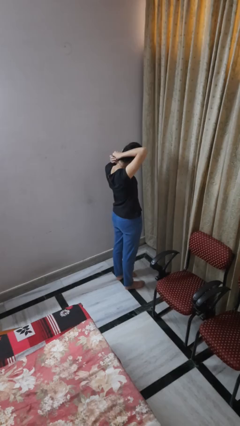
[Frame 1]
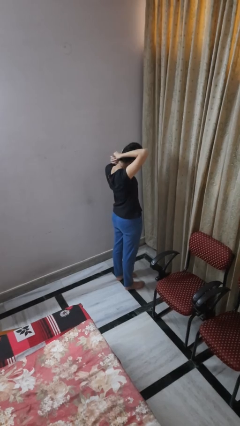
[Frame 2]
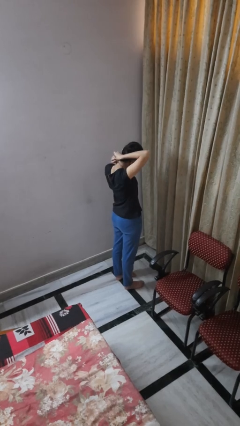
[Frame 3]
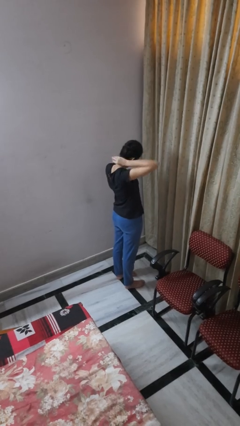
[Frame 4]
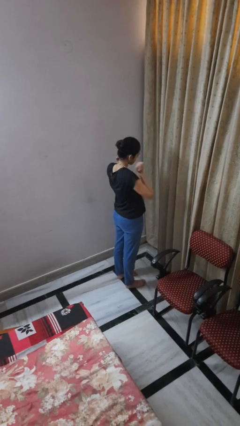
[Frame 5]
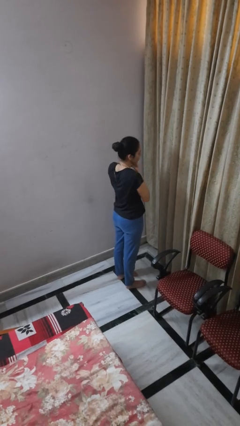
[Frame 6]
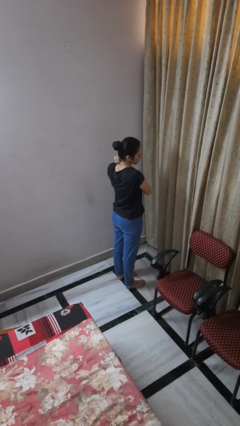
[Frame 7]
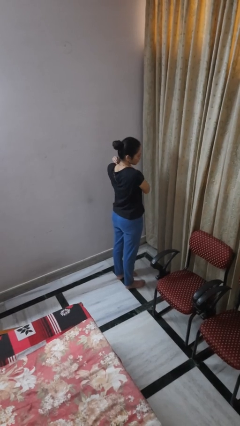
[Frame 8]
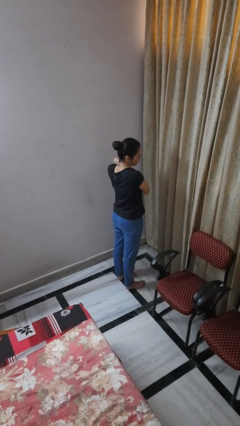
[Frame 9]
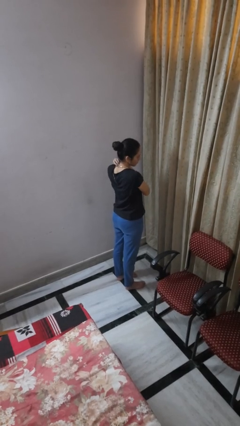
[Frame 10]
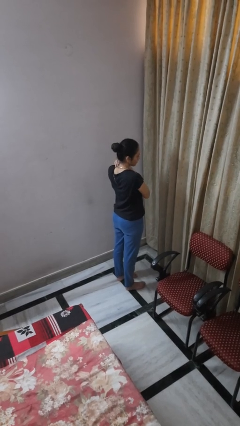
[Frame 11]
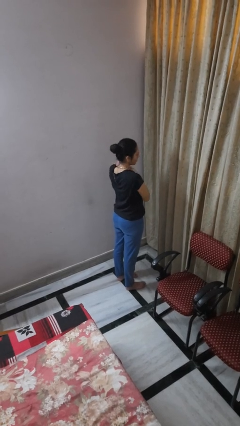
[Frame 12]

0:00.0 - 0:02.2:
person puts on necklace

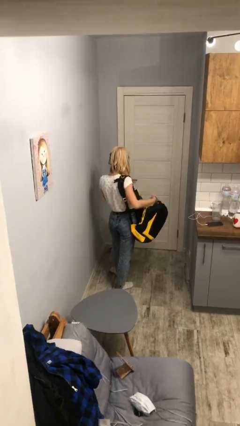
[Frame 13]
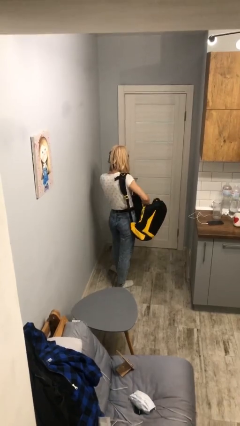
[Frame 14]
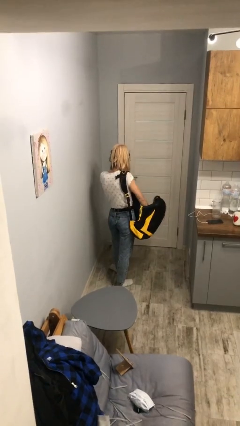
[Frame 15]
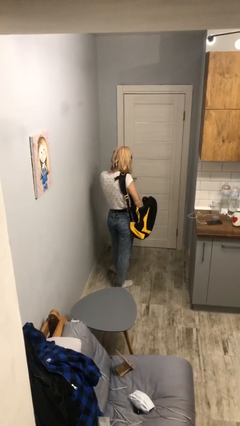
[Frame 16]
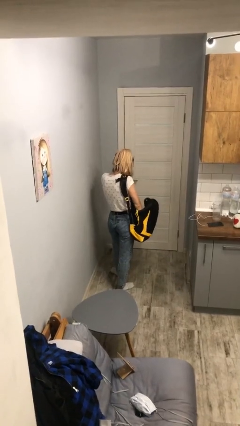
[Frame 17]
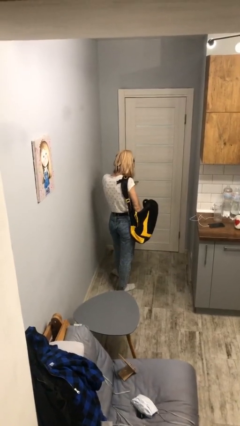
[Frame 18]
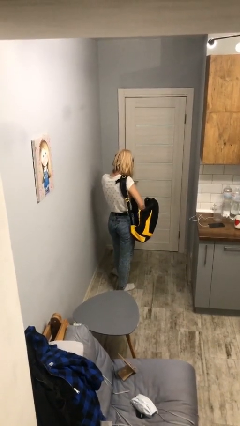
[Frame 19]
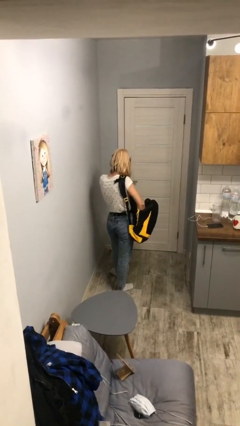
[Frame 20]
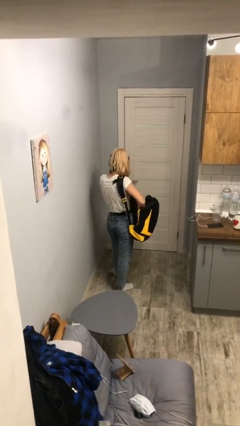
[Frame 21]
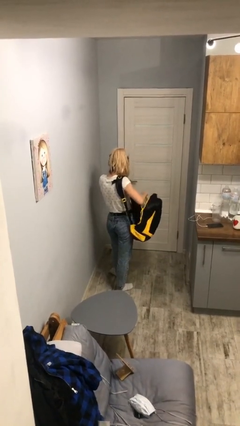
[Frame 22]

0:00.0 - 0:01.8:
person searches in backpack

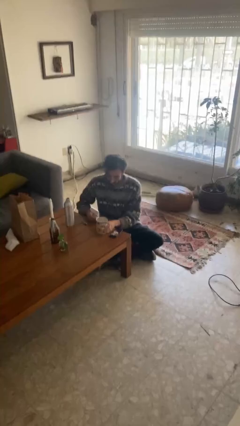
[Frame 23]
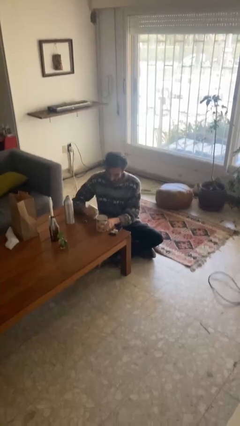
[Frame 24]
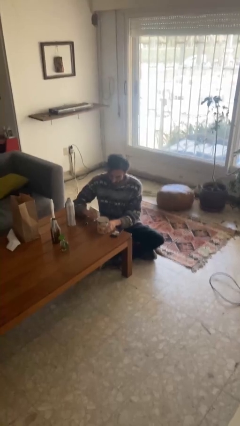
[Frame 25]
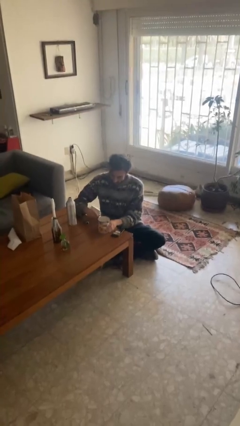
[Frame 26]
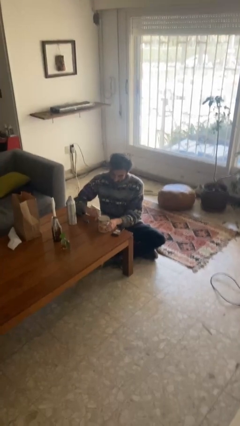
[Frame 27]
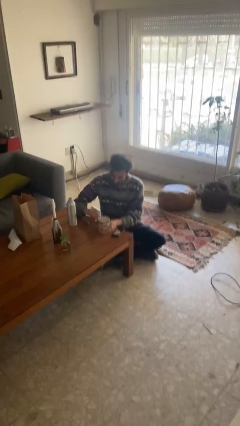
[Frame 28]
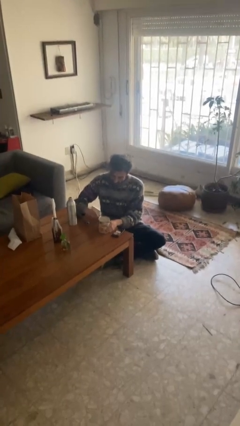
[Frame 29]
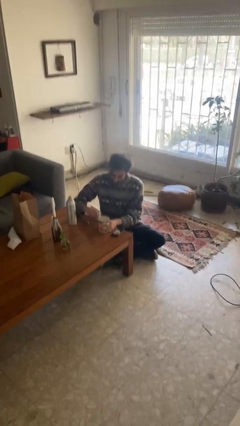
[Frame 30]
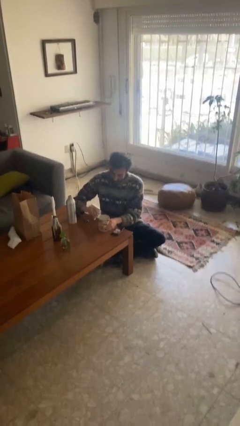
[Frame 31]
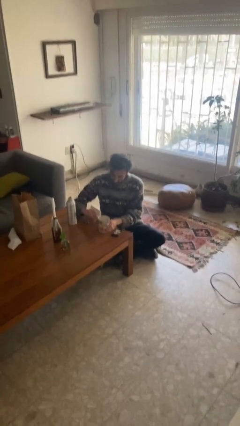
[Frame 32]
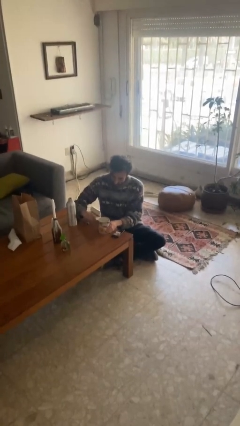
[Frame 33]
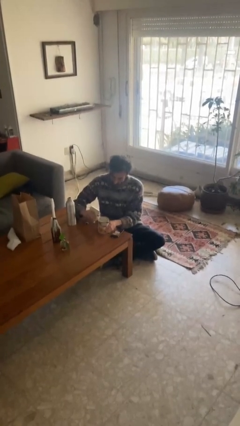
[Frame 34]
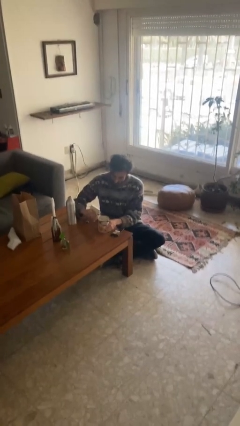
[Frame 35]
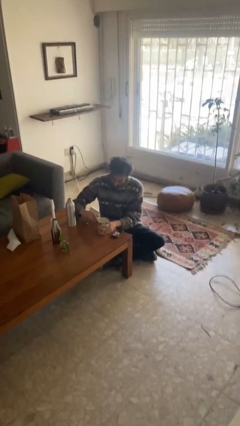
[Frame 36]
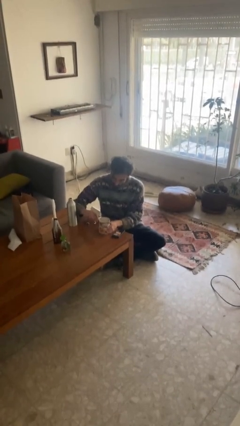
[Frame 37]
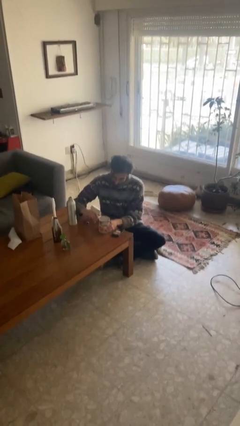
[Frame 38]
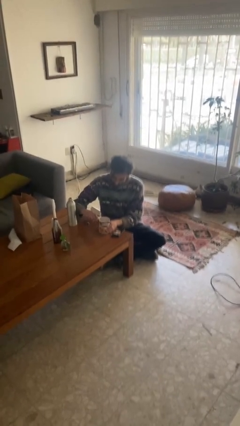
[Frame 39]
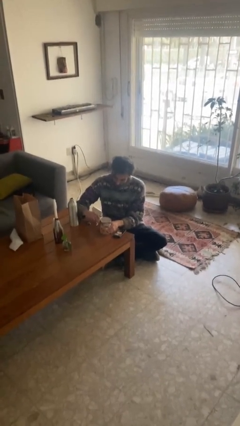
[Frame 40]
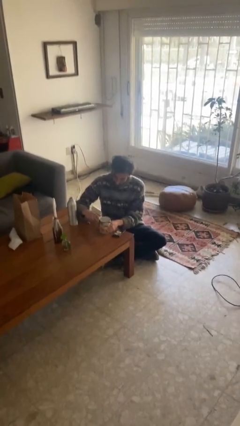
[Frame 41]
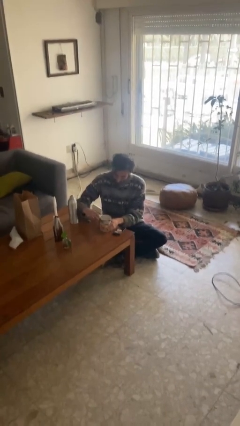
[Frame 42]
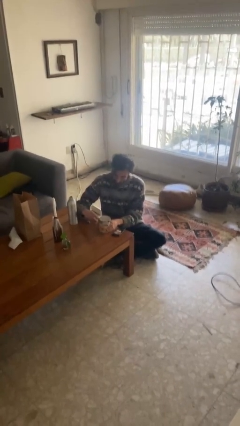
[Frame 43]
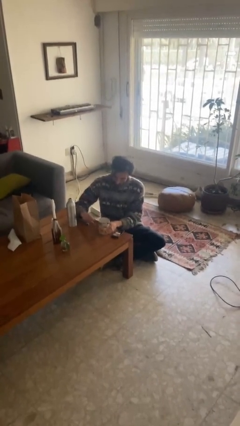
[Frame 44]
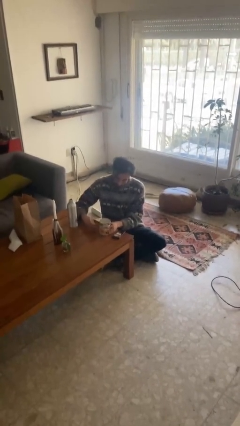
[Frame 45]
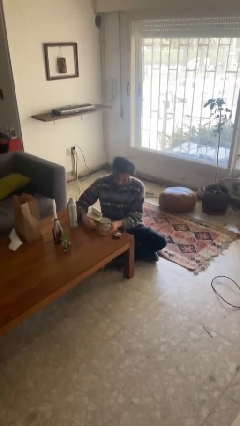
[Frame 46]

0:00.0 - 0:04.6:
person opens can with can opener

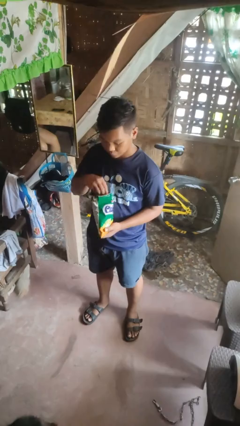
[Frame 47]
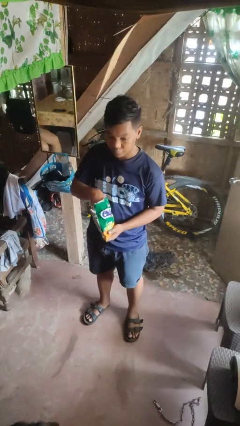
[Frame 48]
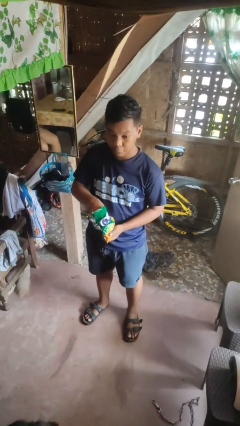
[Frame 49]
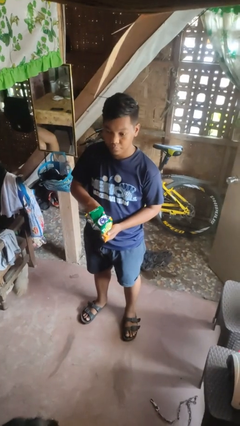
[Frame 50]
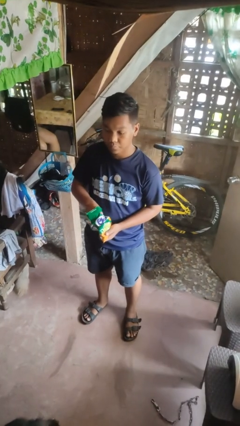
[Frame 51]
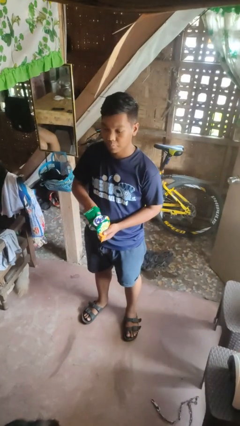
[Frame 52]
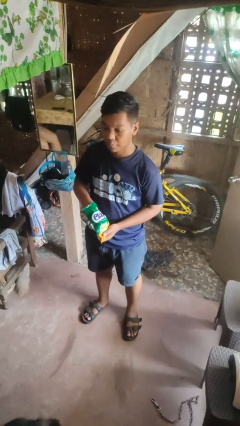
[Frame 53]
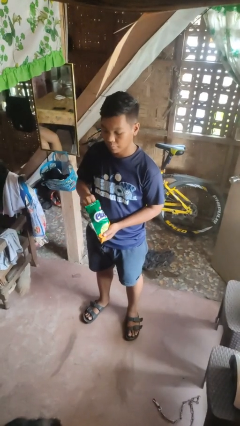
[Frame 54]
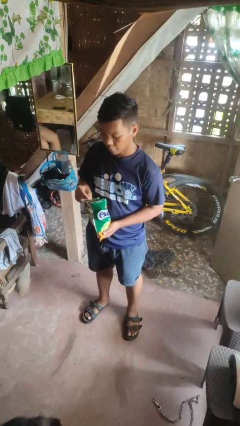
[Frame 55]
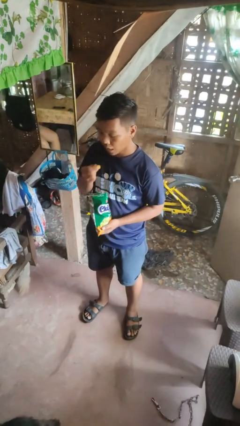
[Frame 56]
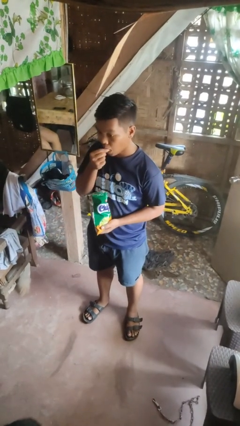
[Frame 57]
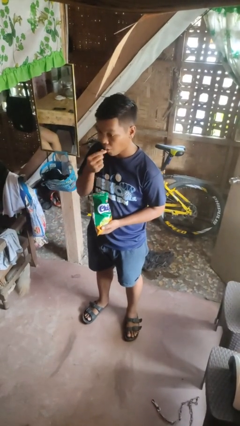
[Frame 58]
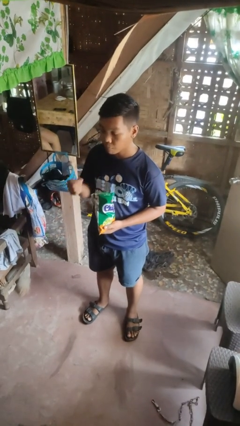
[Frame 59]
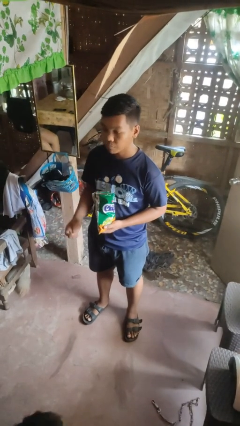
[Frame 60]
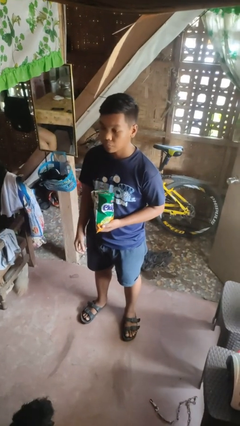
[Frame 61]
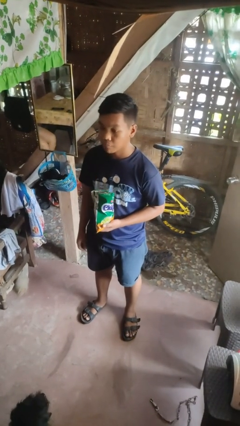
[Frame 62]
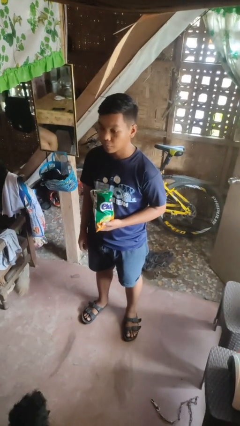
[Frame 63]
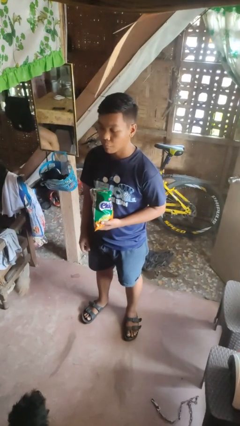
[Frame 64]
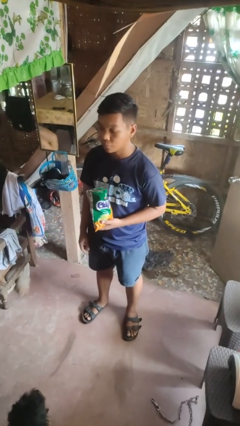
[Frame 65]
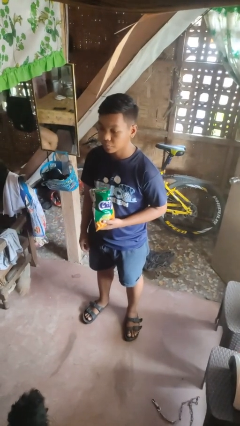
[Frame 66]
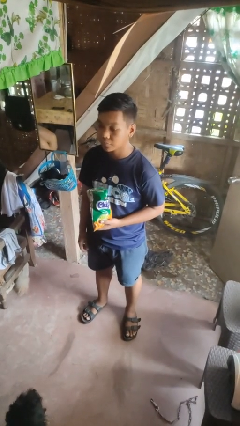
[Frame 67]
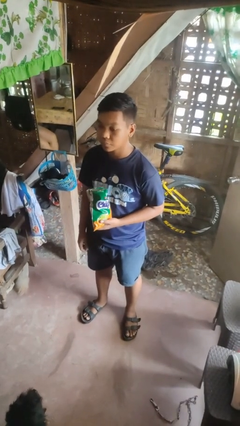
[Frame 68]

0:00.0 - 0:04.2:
person eats snack from bag

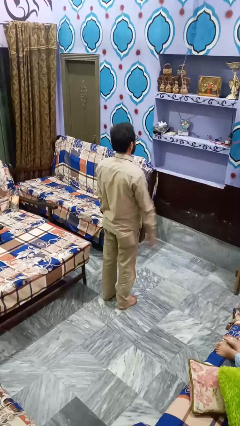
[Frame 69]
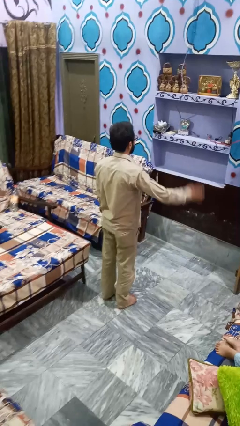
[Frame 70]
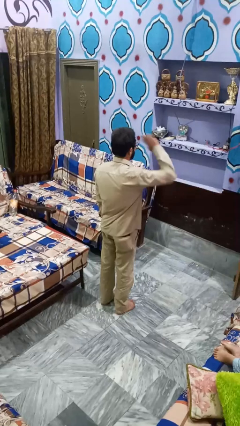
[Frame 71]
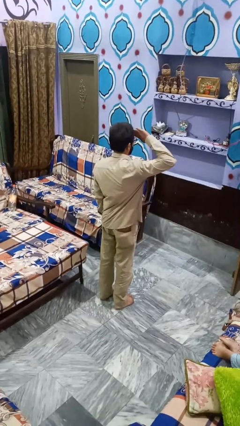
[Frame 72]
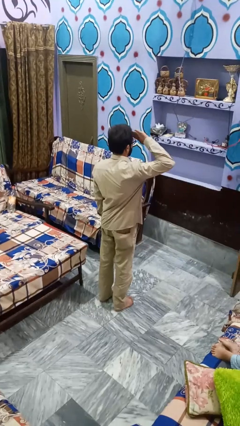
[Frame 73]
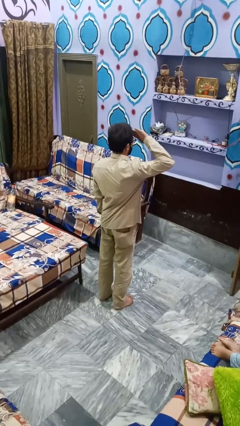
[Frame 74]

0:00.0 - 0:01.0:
person salutes

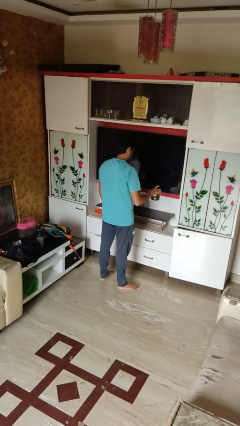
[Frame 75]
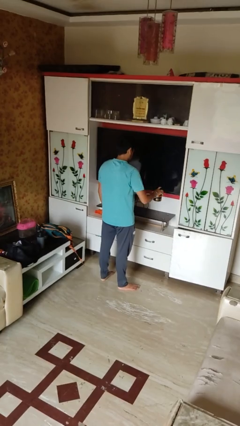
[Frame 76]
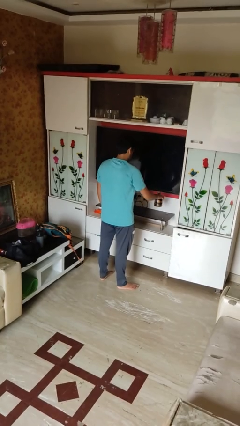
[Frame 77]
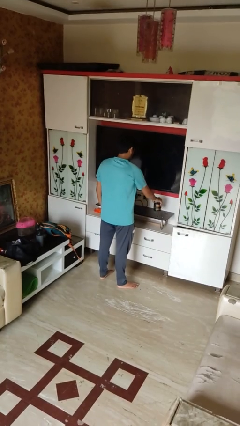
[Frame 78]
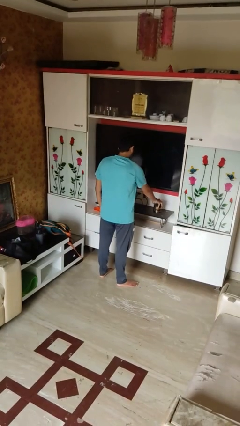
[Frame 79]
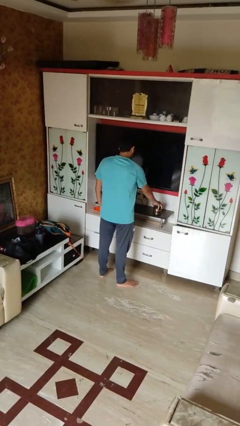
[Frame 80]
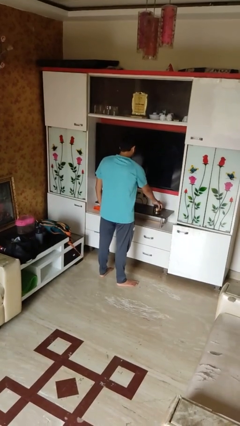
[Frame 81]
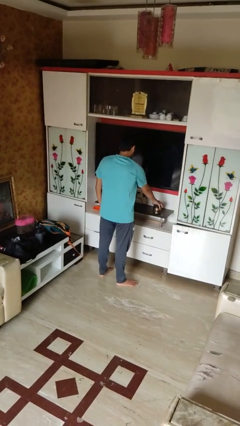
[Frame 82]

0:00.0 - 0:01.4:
person puts down object on countertop

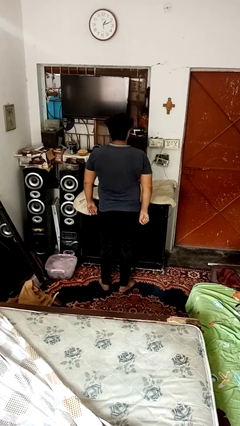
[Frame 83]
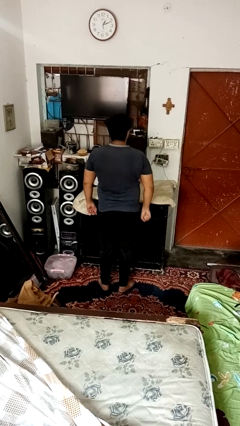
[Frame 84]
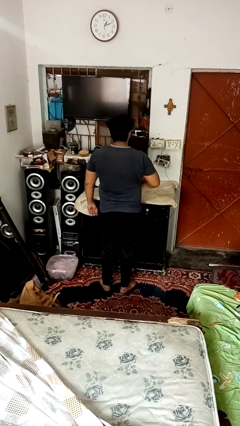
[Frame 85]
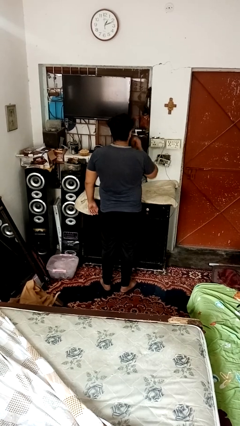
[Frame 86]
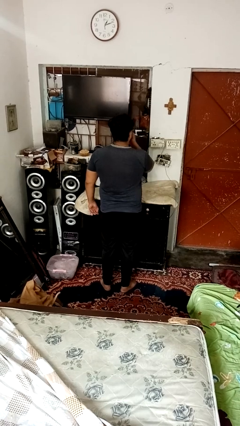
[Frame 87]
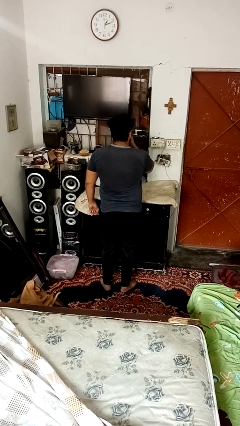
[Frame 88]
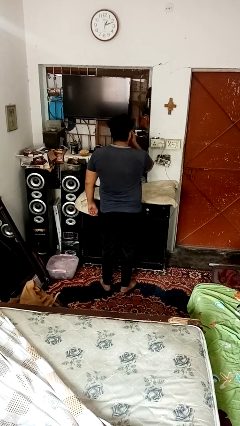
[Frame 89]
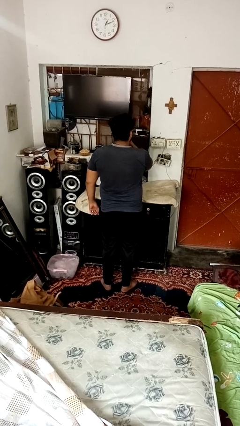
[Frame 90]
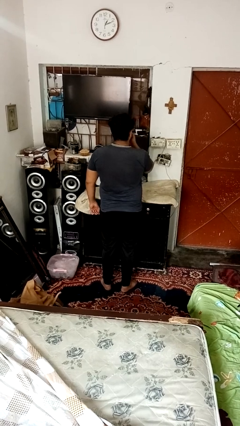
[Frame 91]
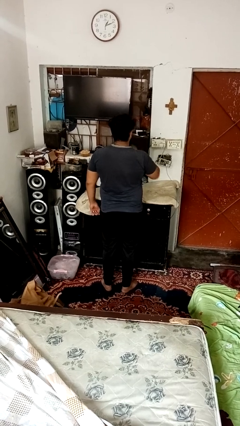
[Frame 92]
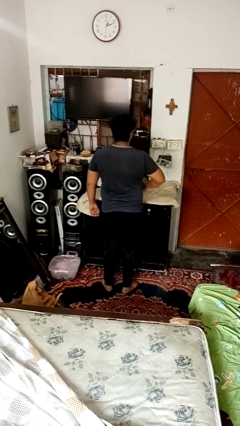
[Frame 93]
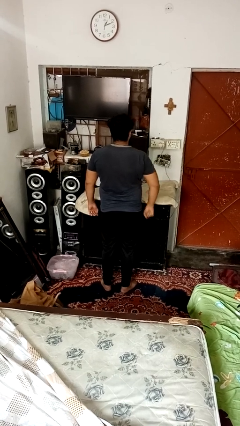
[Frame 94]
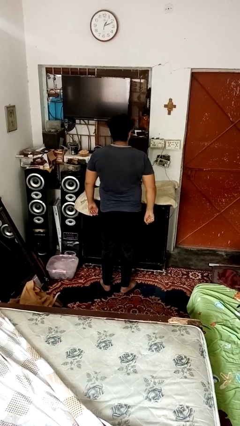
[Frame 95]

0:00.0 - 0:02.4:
person applies lip makeup
